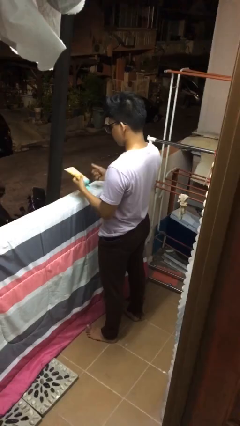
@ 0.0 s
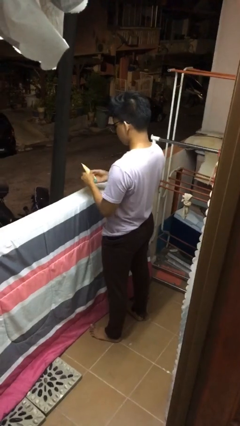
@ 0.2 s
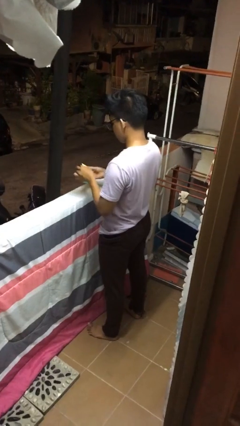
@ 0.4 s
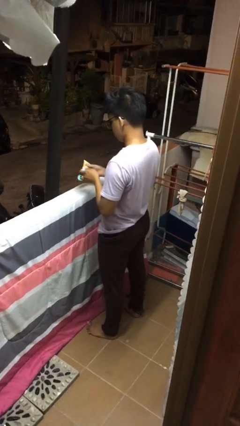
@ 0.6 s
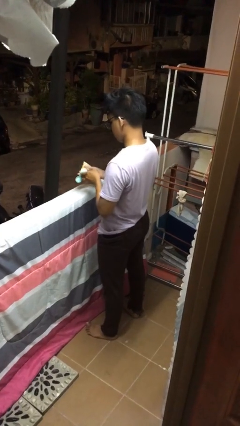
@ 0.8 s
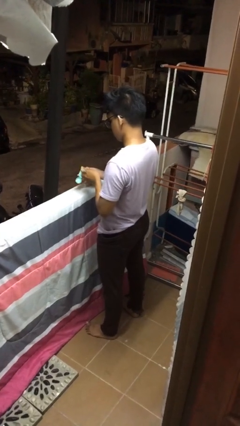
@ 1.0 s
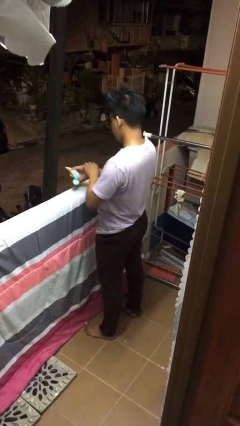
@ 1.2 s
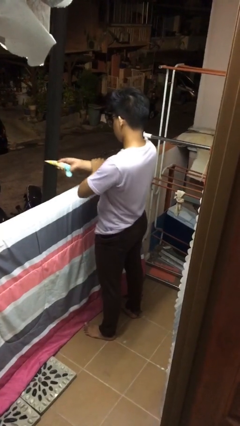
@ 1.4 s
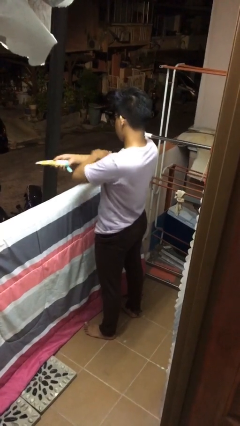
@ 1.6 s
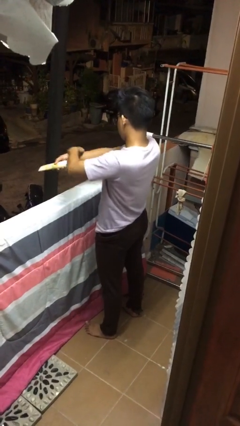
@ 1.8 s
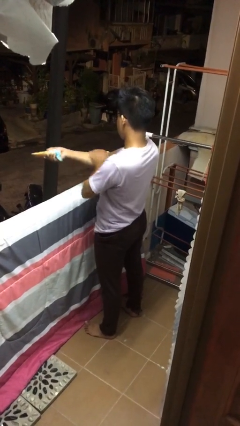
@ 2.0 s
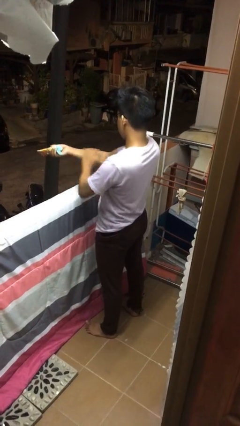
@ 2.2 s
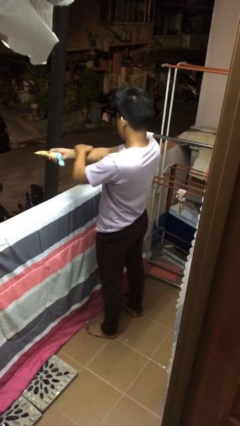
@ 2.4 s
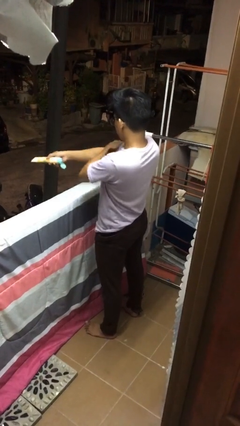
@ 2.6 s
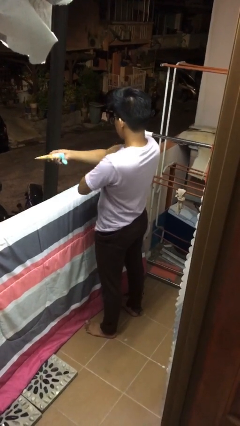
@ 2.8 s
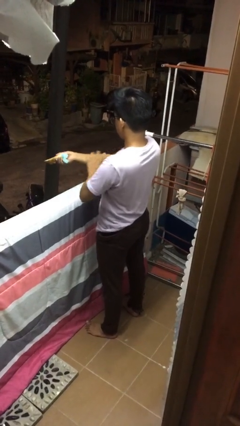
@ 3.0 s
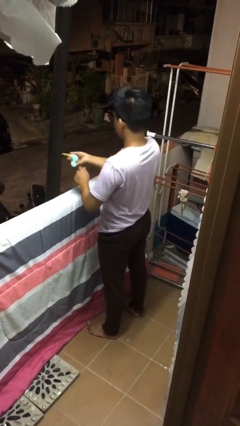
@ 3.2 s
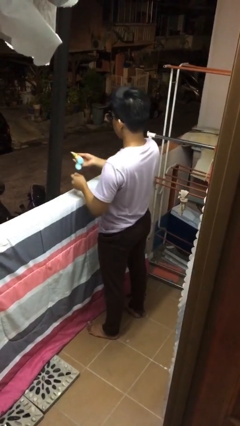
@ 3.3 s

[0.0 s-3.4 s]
person applies sunscreen

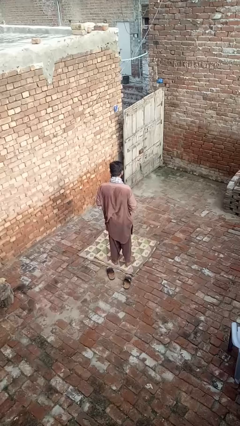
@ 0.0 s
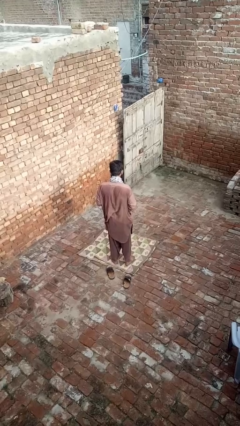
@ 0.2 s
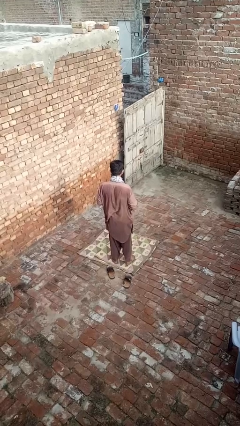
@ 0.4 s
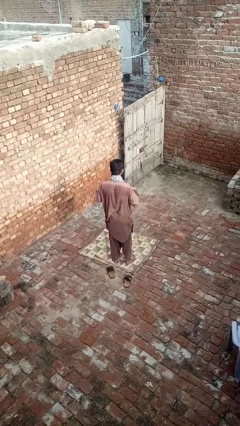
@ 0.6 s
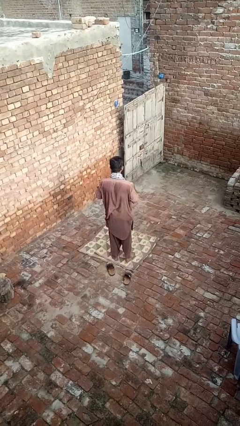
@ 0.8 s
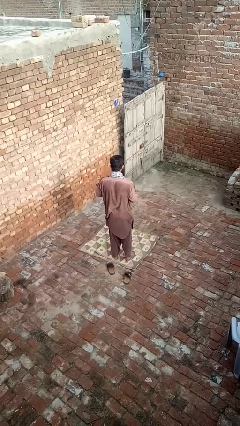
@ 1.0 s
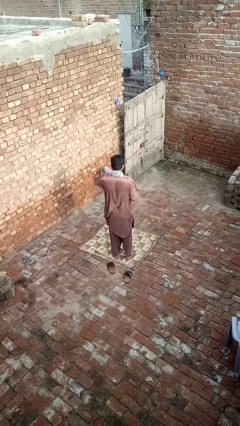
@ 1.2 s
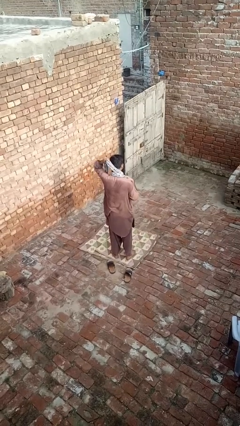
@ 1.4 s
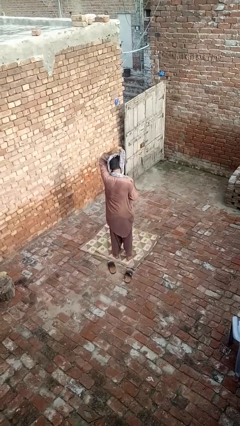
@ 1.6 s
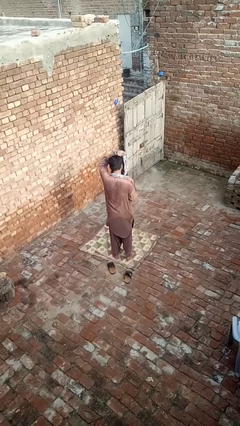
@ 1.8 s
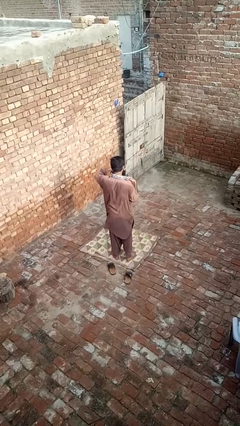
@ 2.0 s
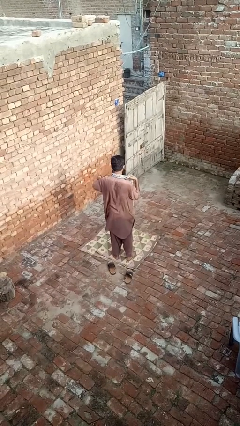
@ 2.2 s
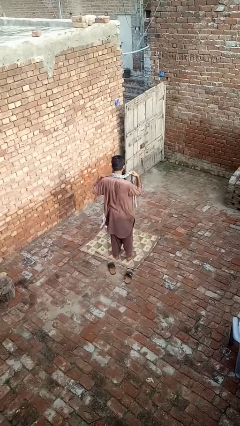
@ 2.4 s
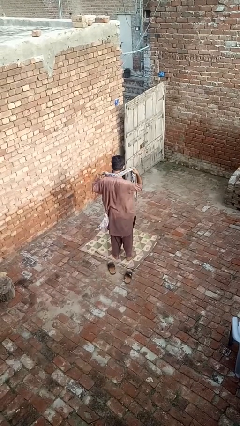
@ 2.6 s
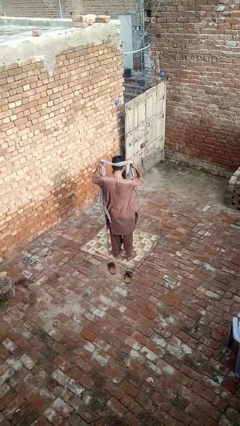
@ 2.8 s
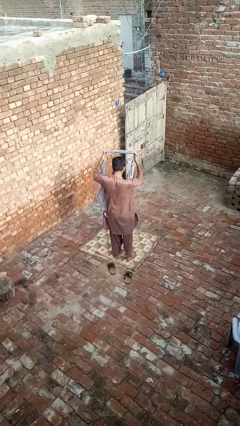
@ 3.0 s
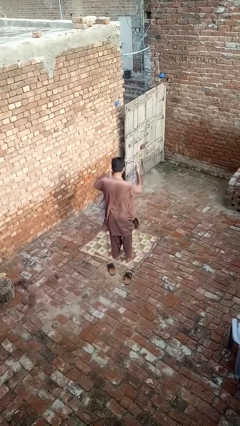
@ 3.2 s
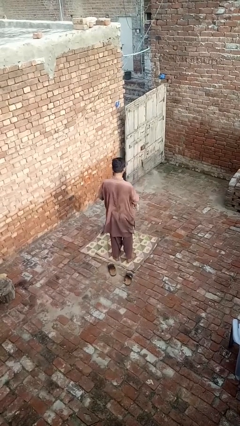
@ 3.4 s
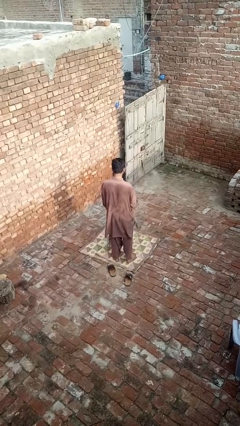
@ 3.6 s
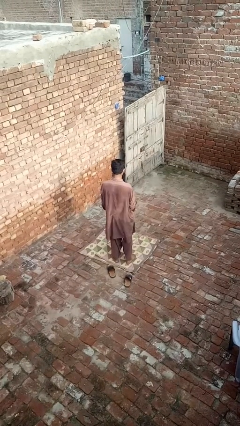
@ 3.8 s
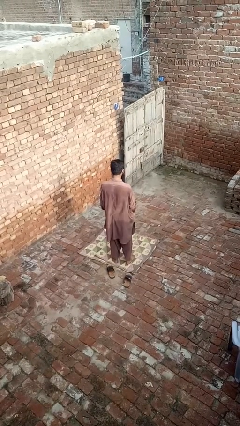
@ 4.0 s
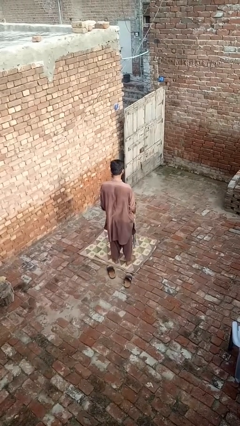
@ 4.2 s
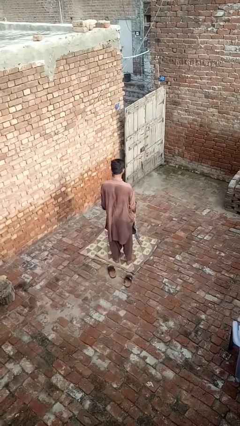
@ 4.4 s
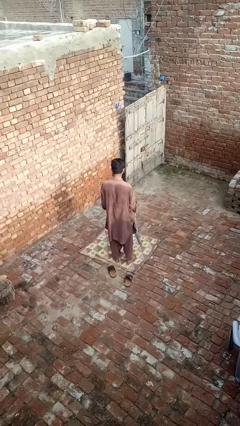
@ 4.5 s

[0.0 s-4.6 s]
person takes off scarf

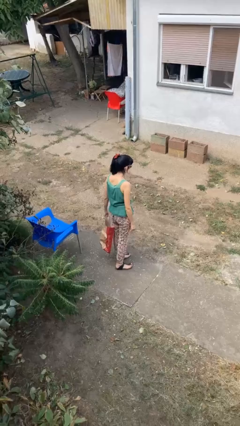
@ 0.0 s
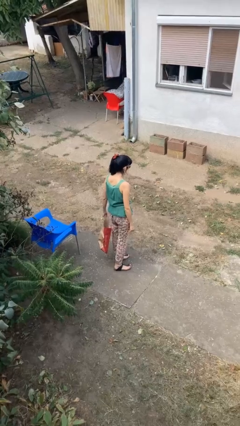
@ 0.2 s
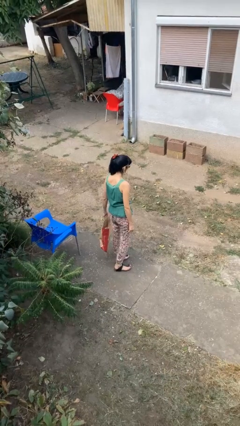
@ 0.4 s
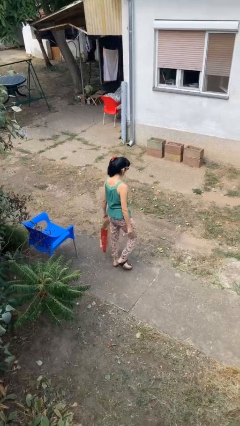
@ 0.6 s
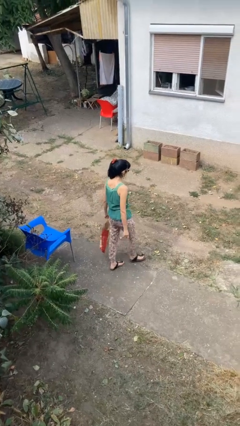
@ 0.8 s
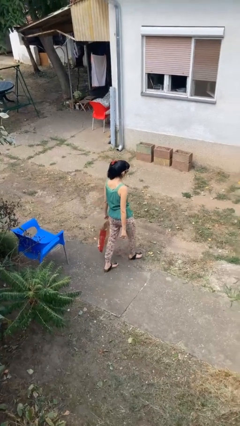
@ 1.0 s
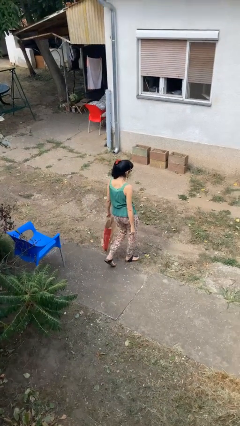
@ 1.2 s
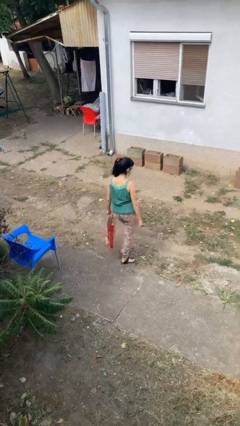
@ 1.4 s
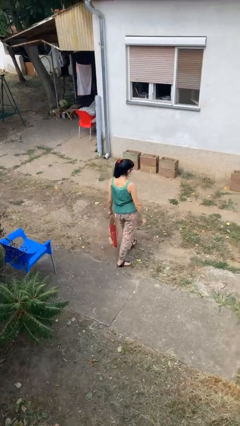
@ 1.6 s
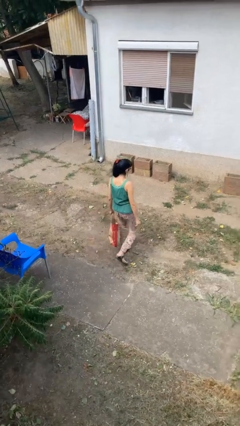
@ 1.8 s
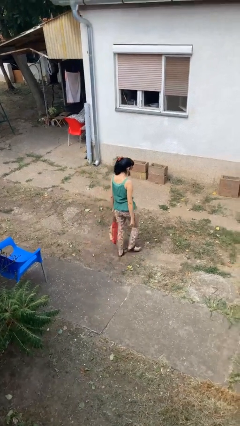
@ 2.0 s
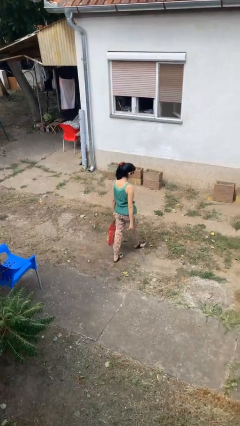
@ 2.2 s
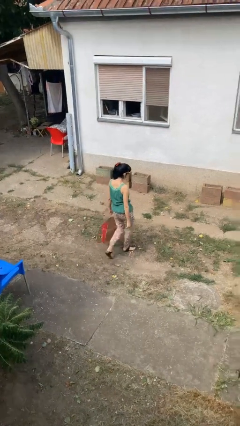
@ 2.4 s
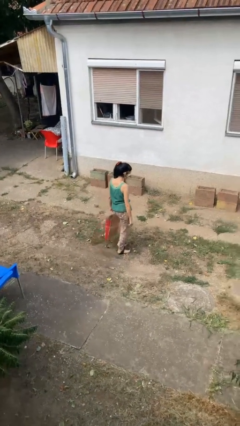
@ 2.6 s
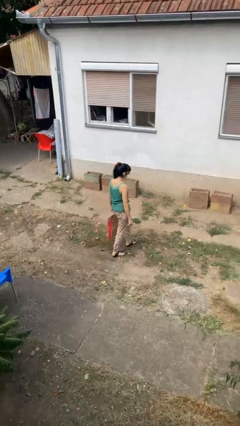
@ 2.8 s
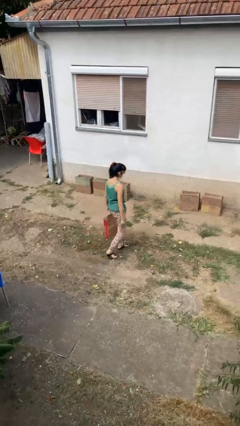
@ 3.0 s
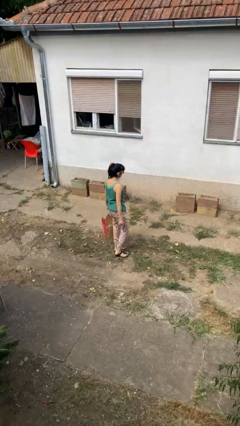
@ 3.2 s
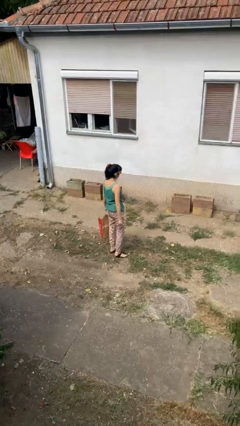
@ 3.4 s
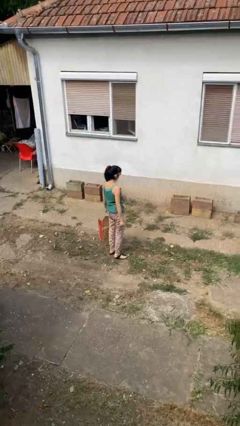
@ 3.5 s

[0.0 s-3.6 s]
person carries groceries

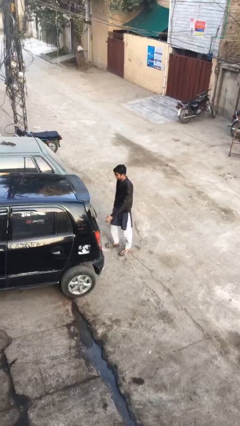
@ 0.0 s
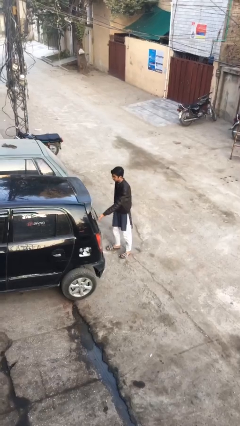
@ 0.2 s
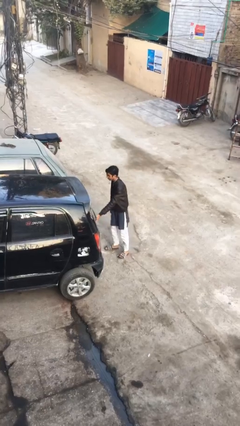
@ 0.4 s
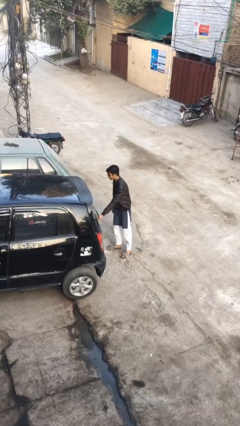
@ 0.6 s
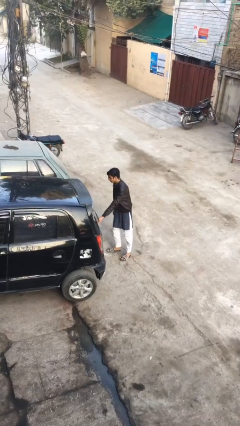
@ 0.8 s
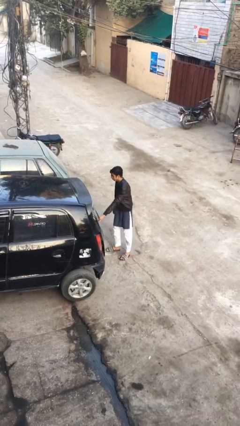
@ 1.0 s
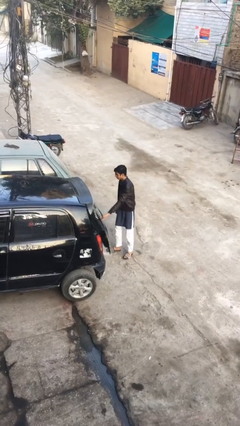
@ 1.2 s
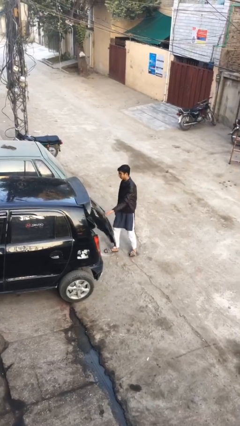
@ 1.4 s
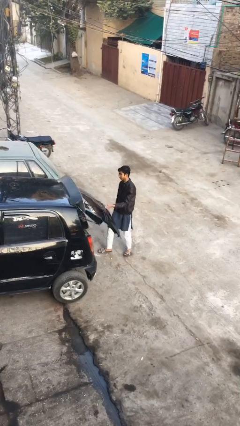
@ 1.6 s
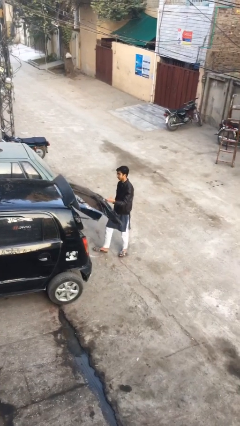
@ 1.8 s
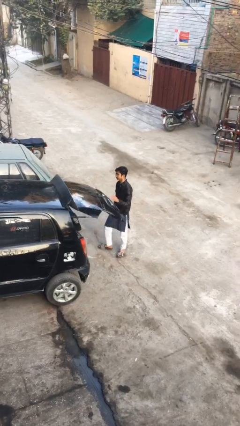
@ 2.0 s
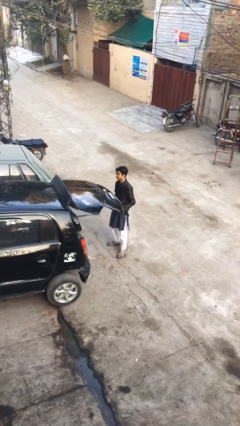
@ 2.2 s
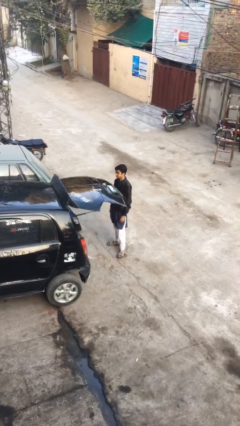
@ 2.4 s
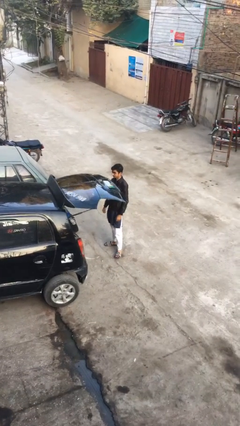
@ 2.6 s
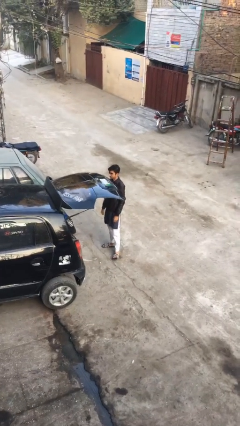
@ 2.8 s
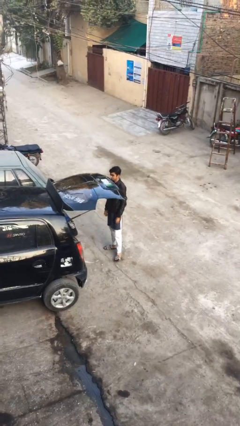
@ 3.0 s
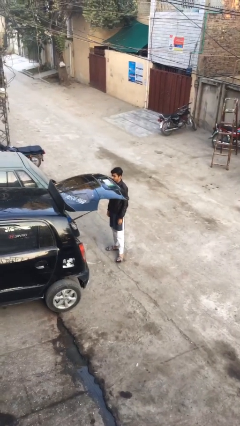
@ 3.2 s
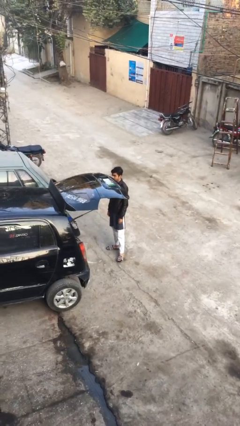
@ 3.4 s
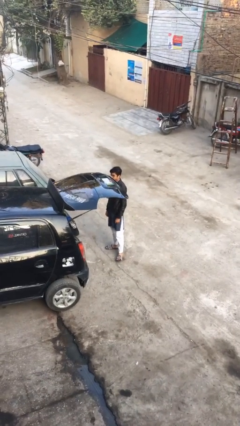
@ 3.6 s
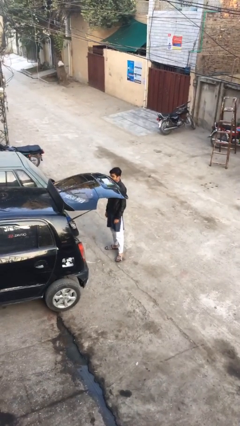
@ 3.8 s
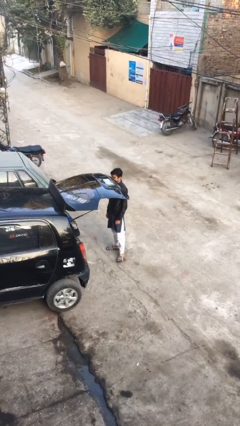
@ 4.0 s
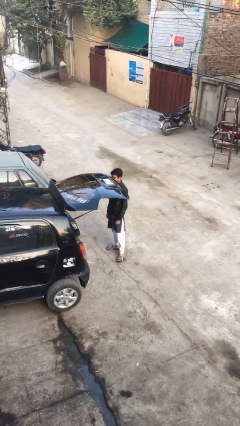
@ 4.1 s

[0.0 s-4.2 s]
person opens car trunk

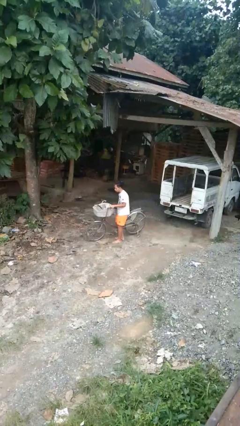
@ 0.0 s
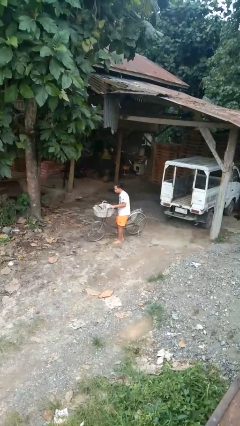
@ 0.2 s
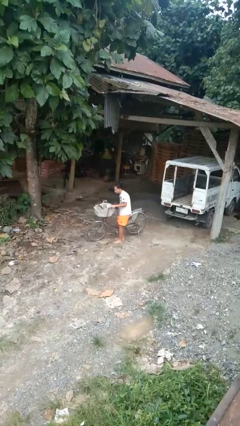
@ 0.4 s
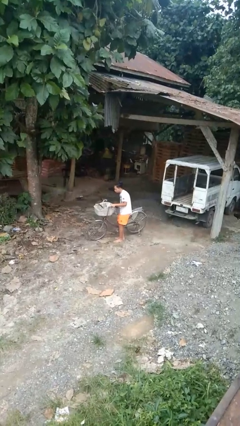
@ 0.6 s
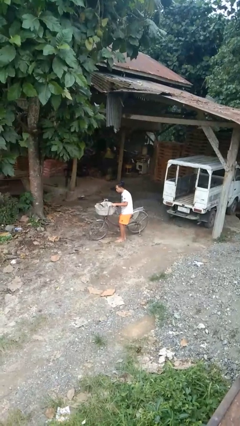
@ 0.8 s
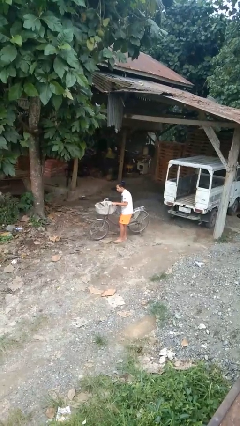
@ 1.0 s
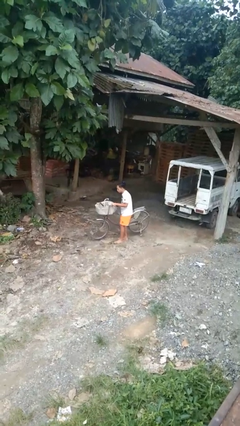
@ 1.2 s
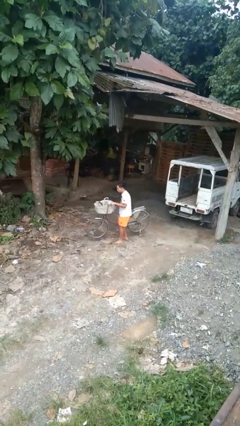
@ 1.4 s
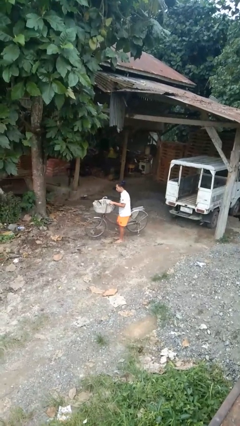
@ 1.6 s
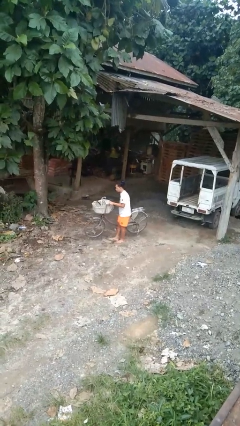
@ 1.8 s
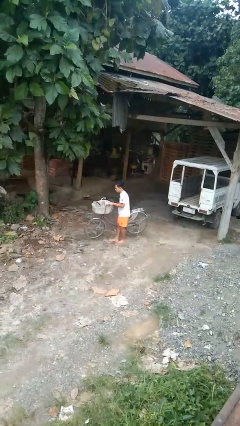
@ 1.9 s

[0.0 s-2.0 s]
person carries bicycle
